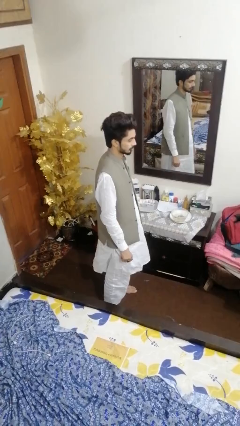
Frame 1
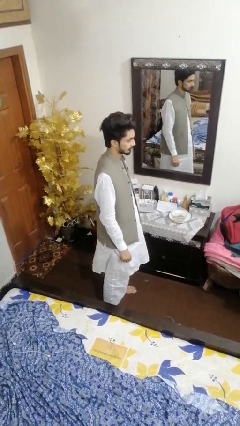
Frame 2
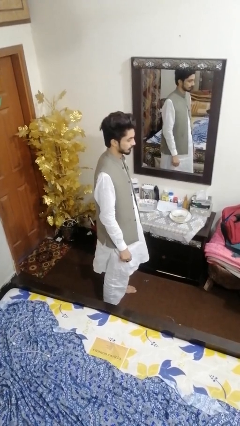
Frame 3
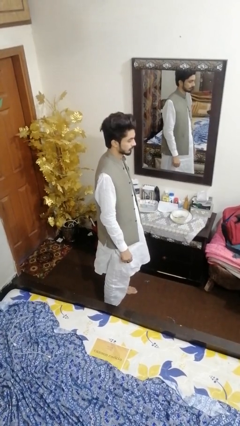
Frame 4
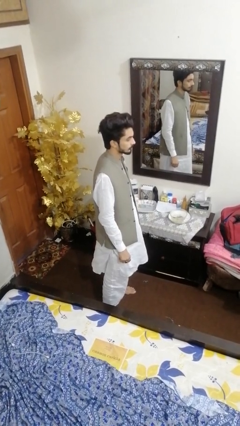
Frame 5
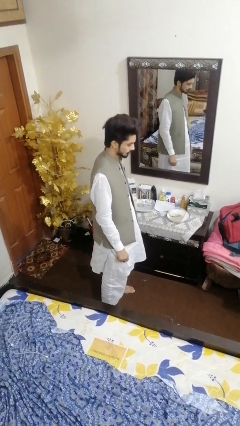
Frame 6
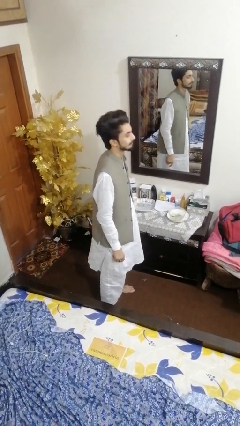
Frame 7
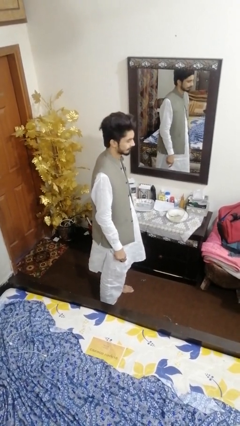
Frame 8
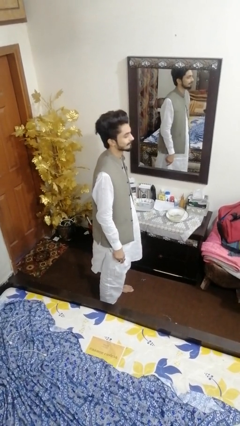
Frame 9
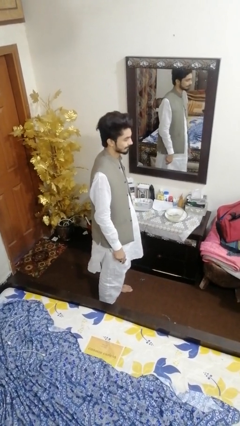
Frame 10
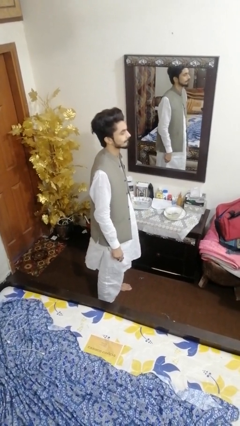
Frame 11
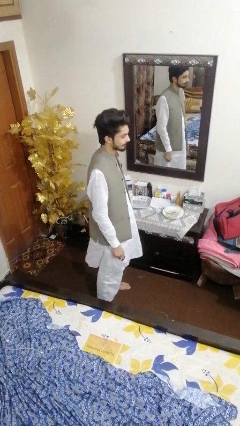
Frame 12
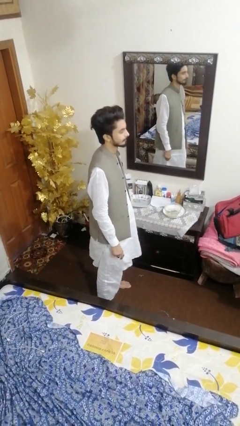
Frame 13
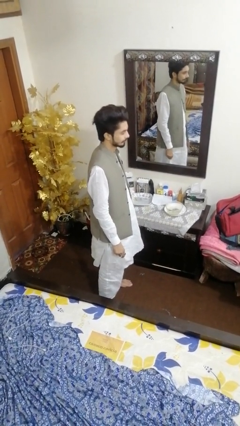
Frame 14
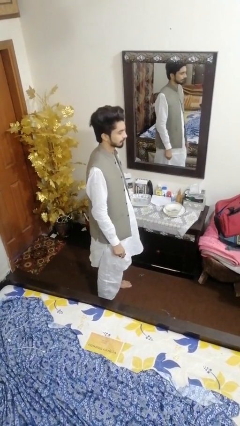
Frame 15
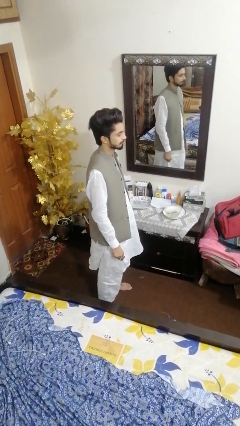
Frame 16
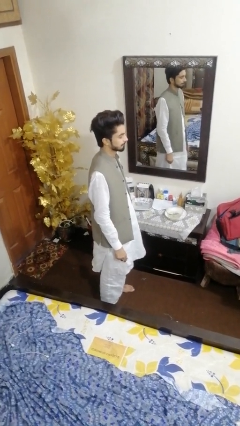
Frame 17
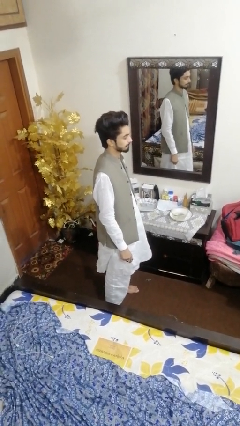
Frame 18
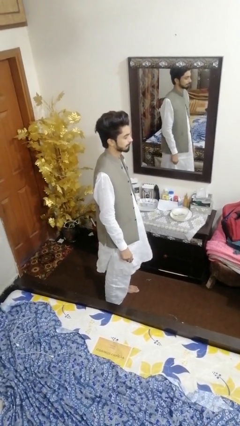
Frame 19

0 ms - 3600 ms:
person nods head

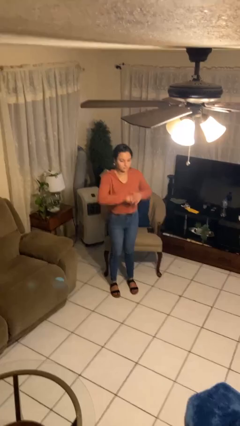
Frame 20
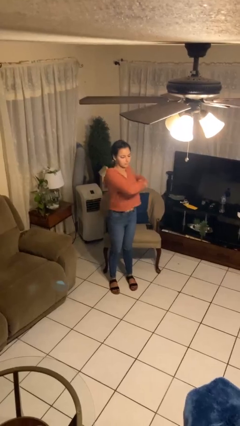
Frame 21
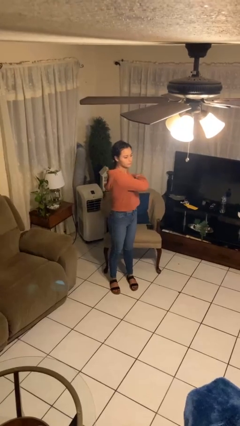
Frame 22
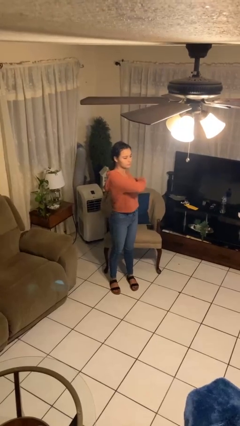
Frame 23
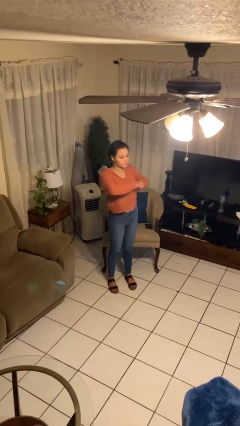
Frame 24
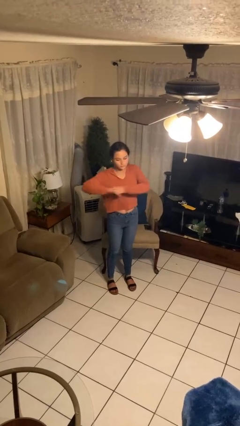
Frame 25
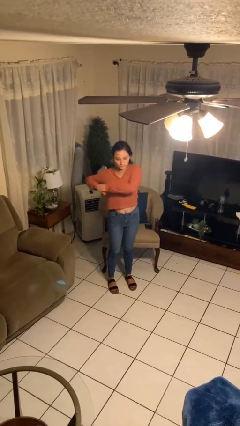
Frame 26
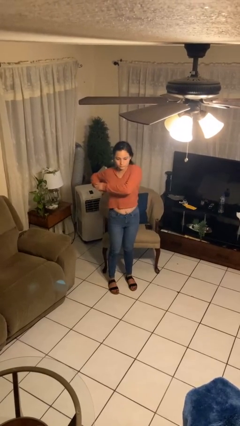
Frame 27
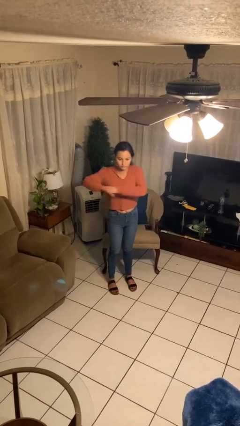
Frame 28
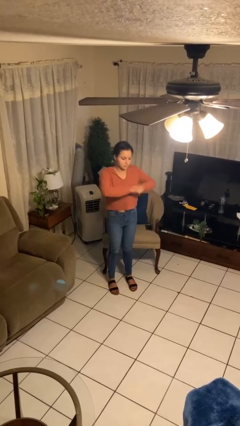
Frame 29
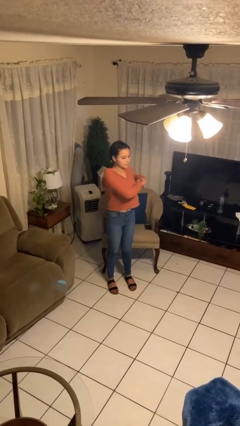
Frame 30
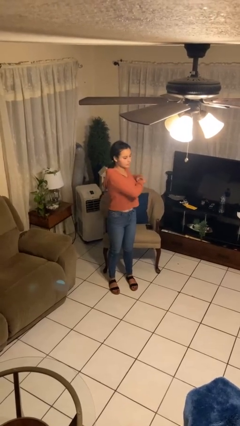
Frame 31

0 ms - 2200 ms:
person stretches arms to side

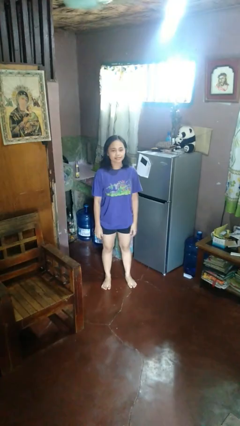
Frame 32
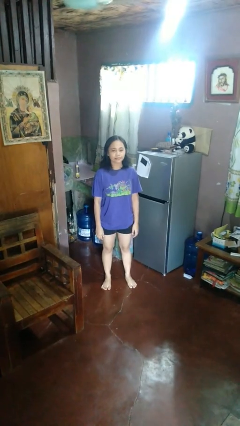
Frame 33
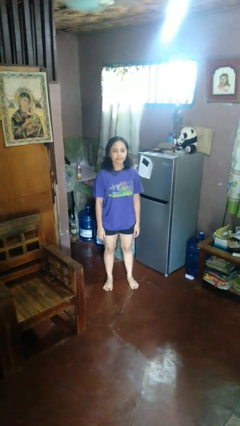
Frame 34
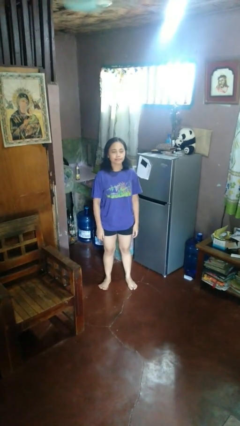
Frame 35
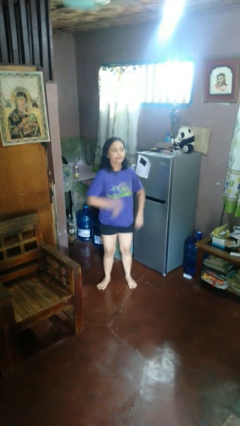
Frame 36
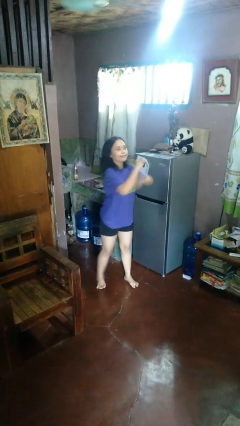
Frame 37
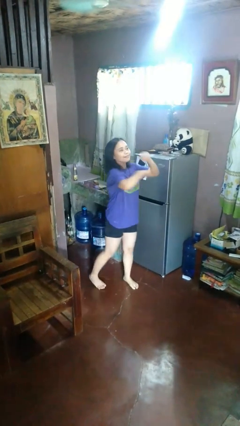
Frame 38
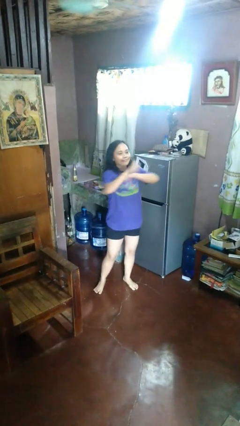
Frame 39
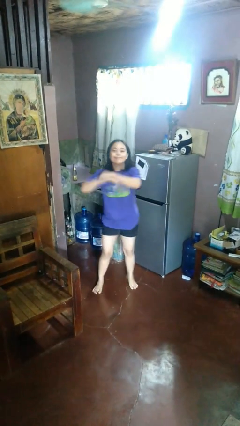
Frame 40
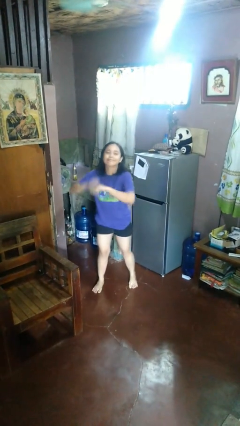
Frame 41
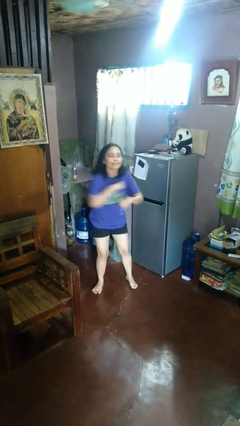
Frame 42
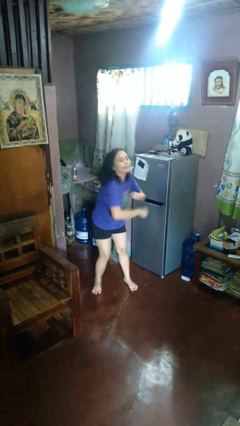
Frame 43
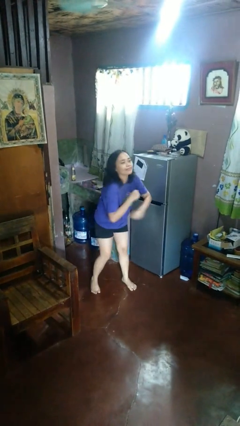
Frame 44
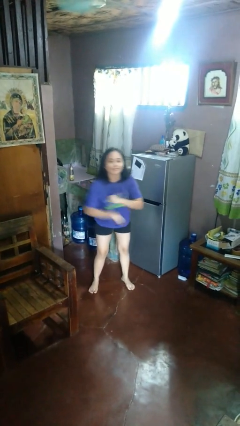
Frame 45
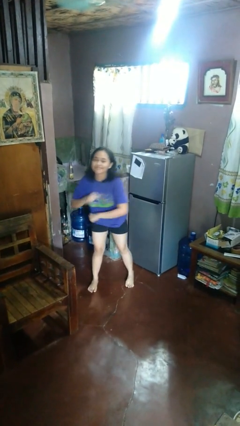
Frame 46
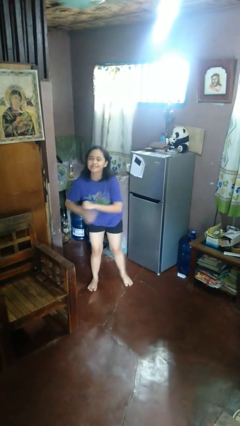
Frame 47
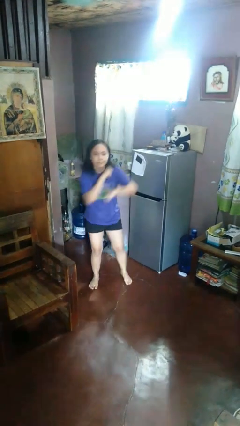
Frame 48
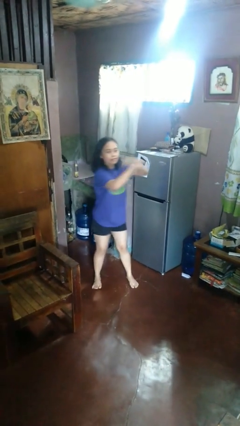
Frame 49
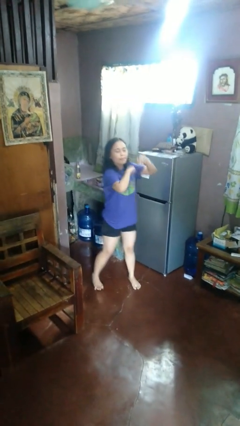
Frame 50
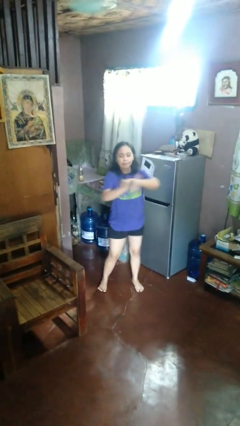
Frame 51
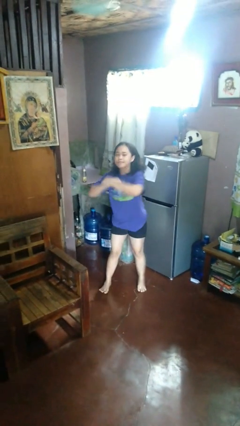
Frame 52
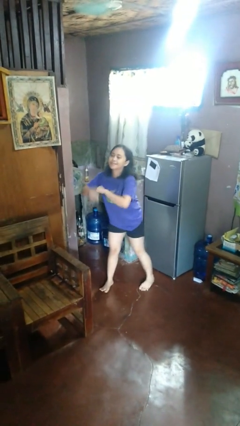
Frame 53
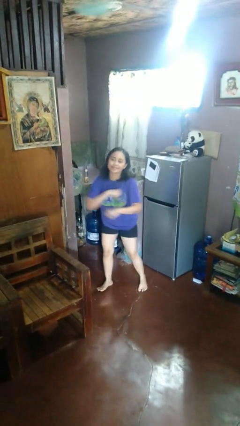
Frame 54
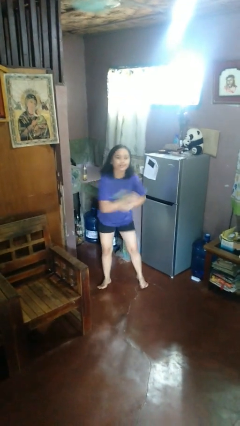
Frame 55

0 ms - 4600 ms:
person dances in place

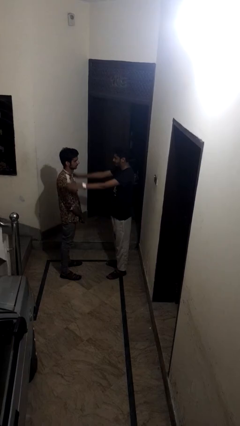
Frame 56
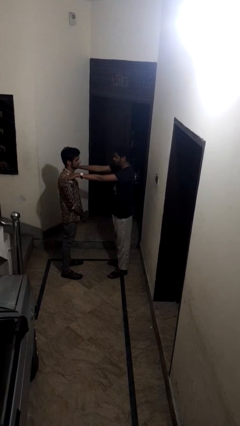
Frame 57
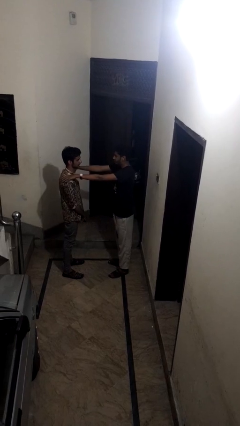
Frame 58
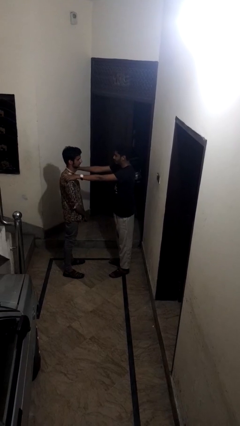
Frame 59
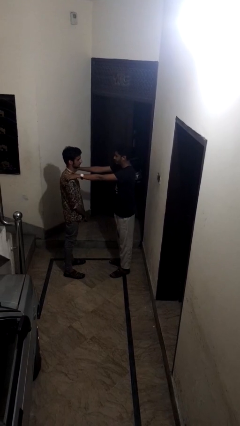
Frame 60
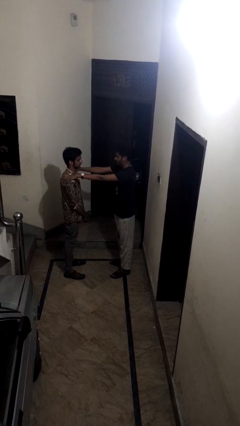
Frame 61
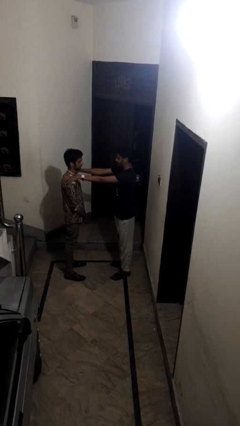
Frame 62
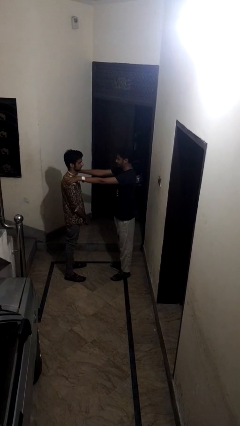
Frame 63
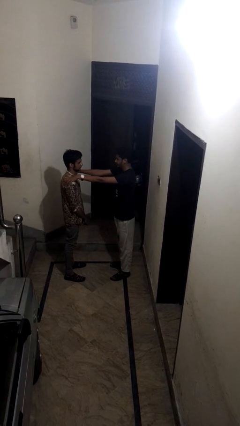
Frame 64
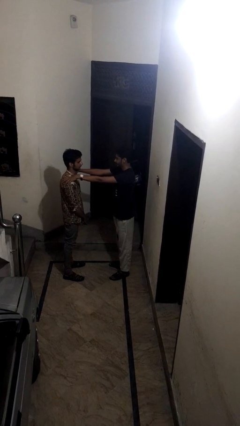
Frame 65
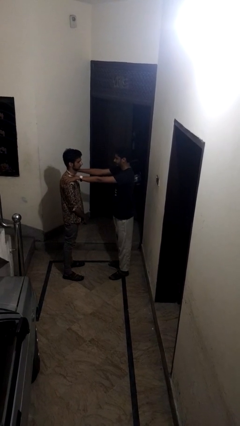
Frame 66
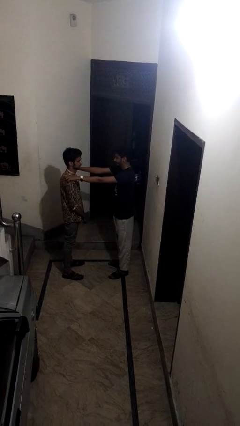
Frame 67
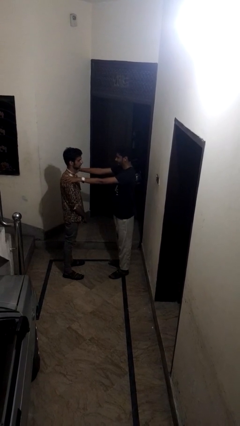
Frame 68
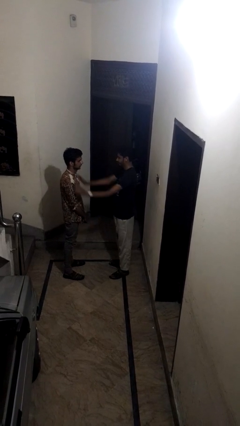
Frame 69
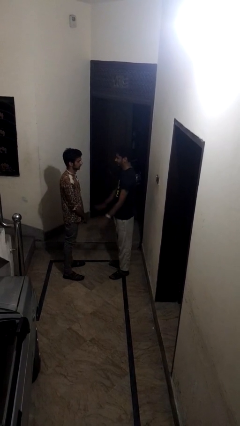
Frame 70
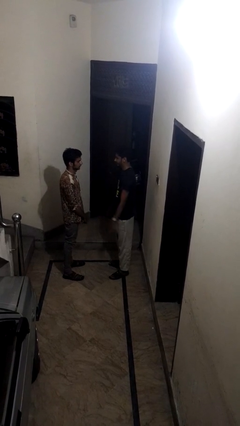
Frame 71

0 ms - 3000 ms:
person pounds shoulders of person

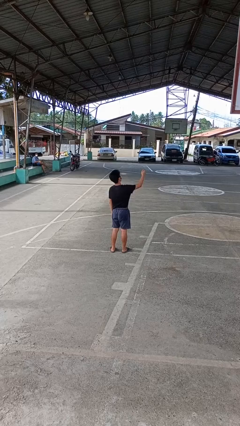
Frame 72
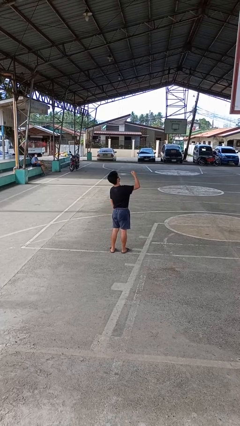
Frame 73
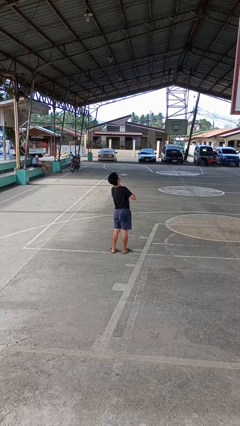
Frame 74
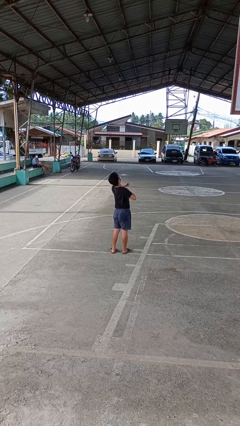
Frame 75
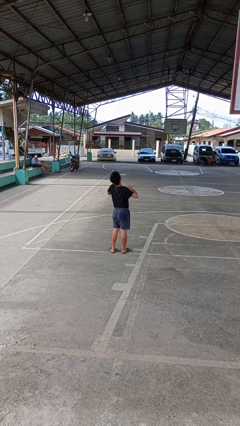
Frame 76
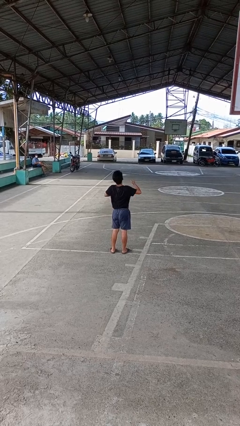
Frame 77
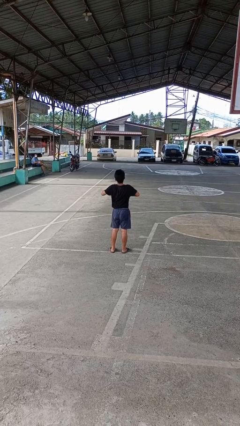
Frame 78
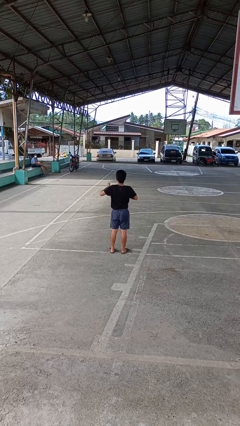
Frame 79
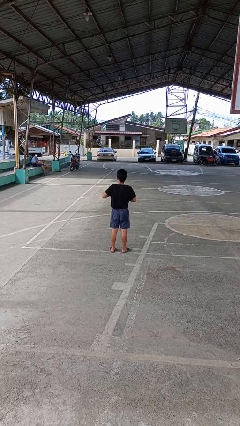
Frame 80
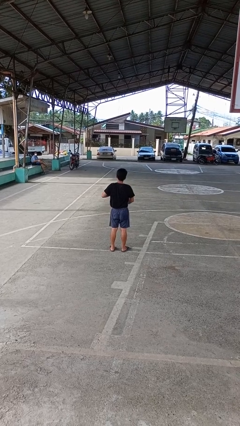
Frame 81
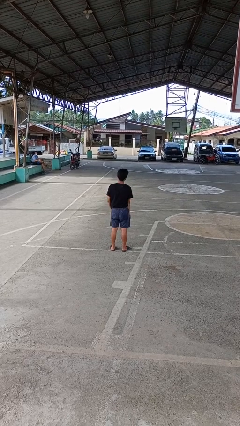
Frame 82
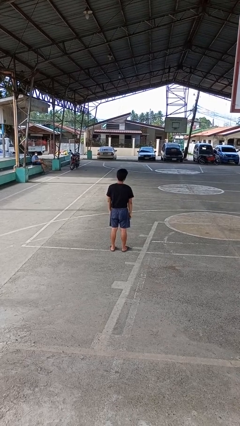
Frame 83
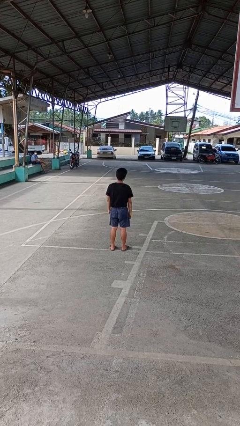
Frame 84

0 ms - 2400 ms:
person drums on chest

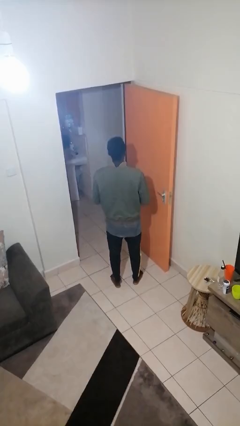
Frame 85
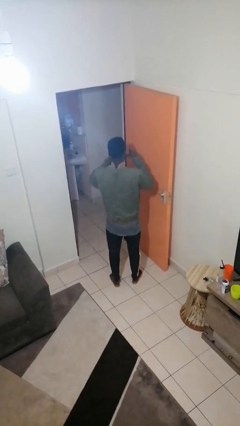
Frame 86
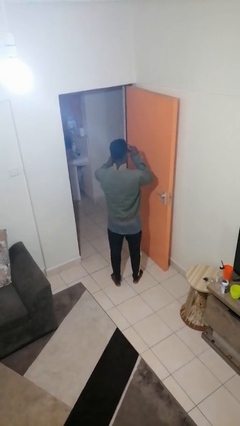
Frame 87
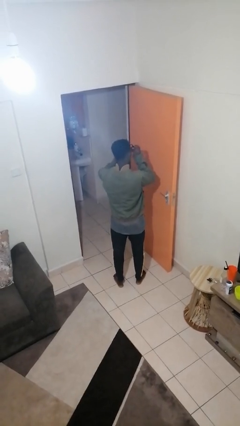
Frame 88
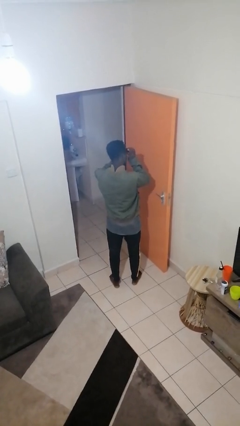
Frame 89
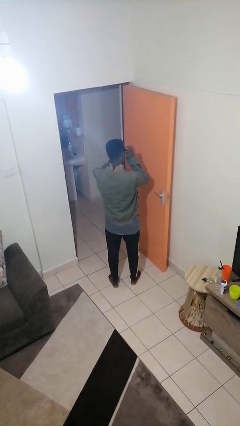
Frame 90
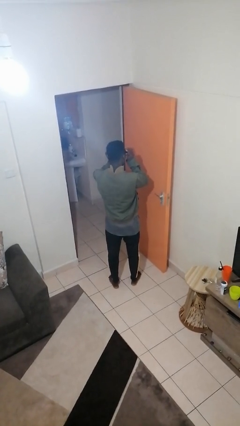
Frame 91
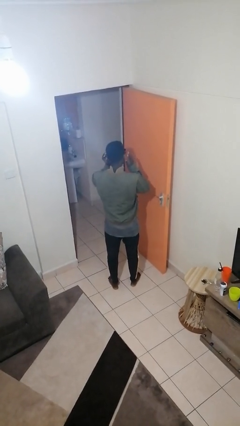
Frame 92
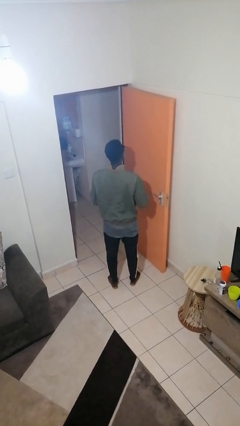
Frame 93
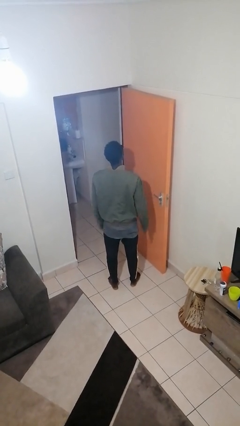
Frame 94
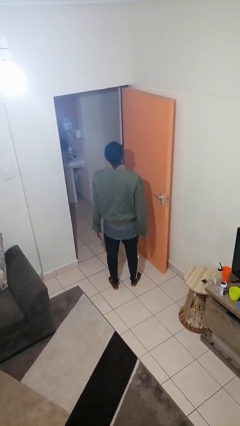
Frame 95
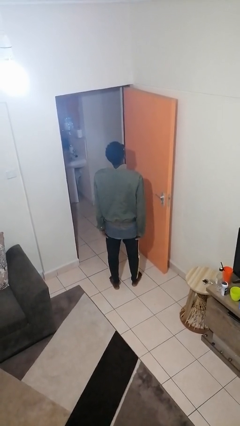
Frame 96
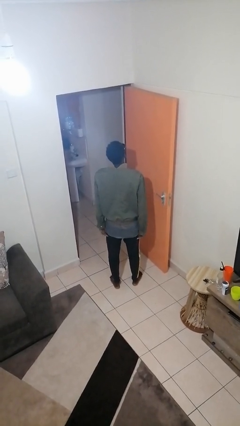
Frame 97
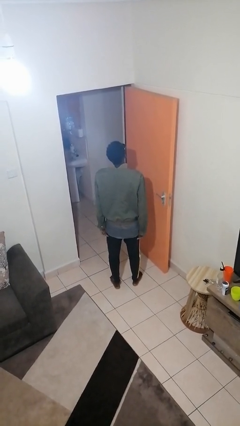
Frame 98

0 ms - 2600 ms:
person puts on sunglasses
